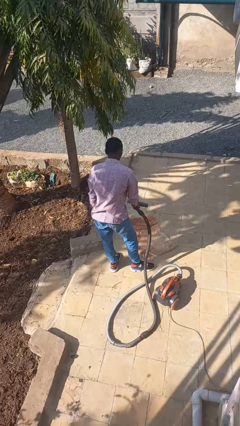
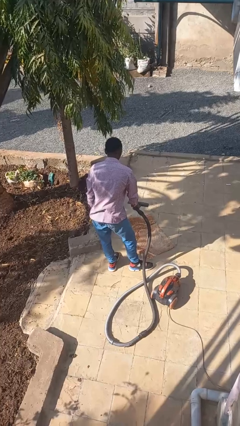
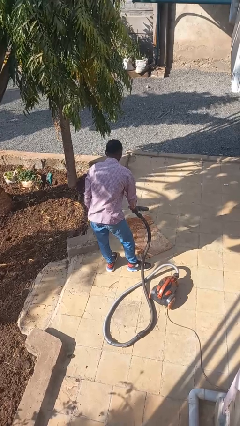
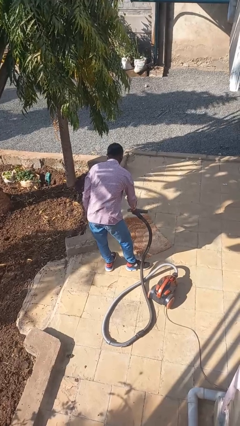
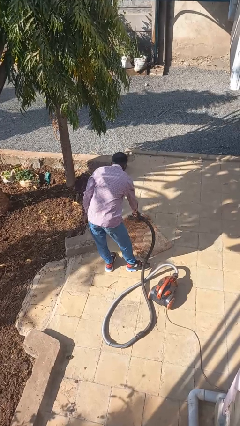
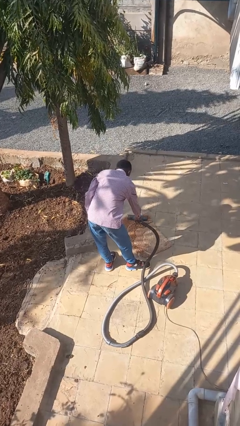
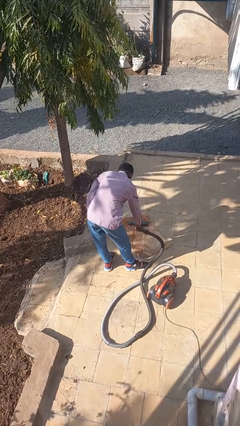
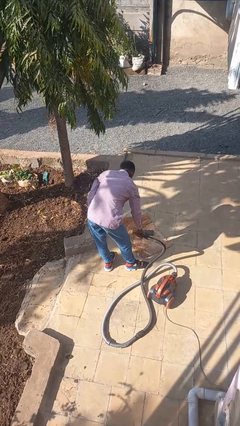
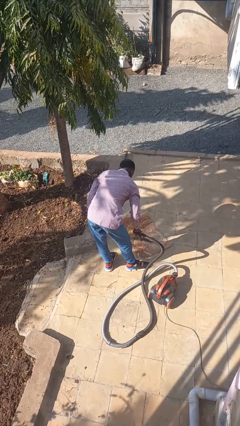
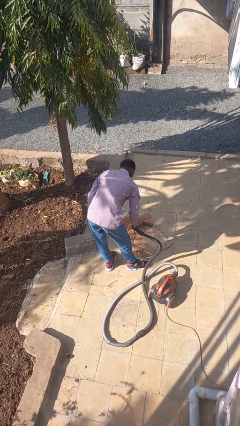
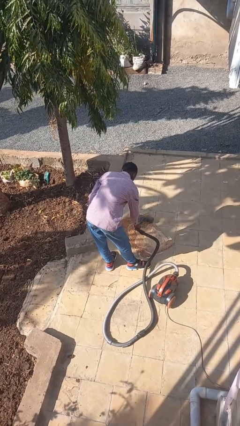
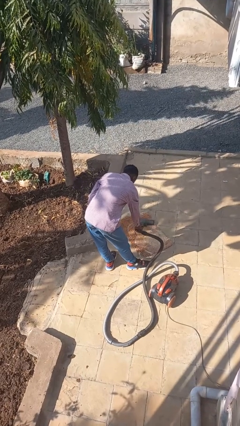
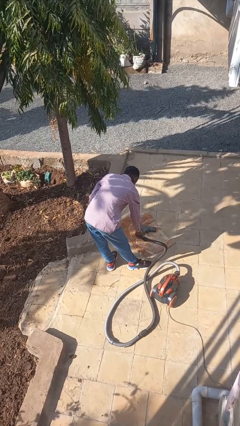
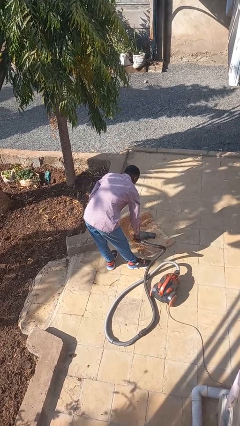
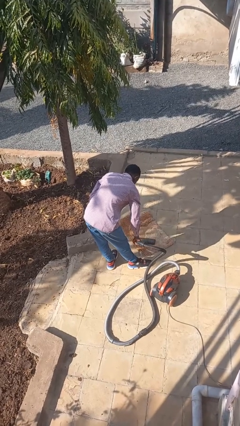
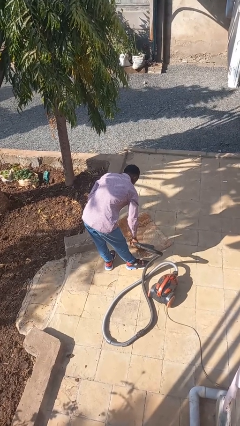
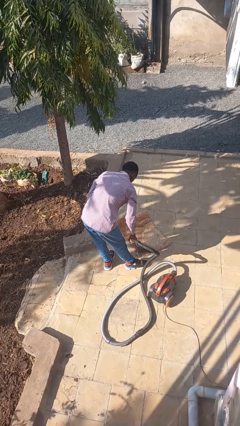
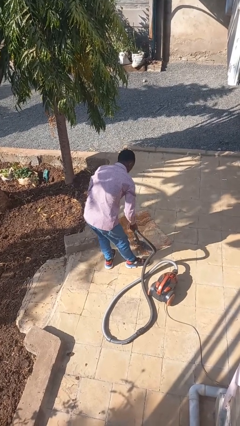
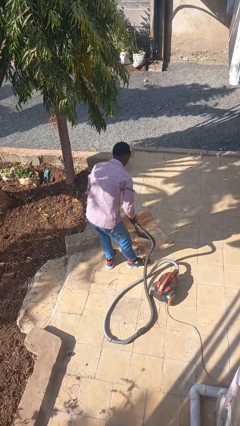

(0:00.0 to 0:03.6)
person vacuums carpet

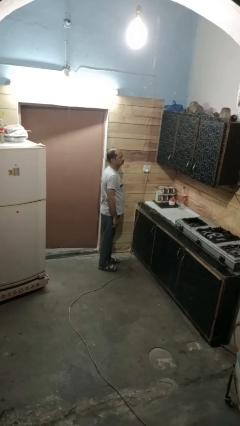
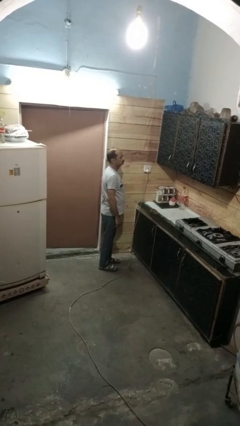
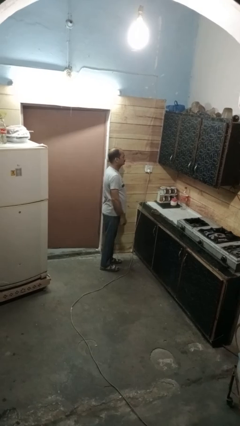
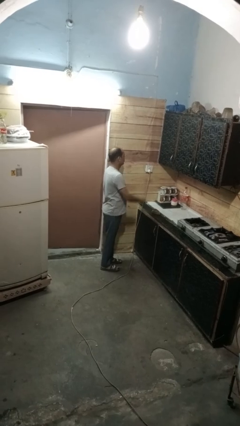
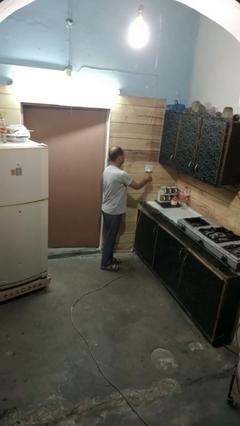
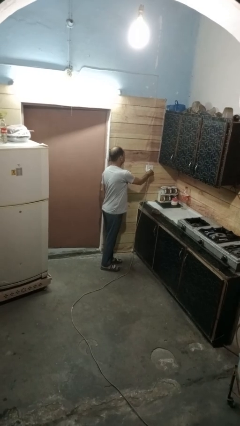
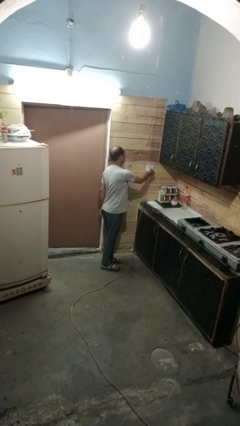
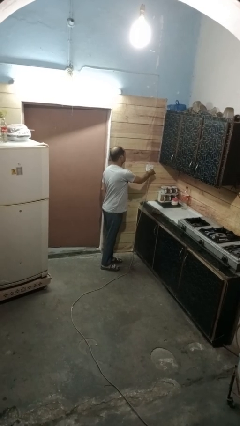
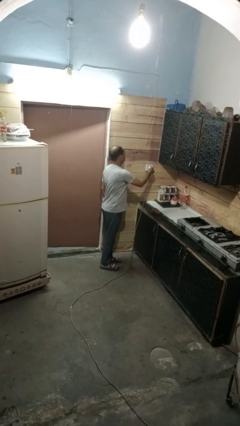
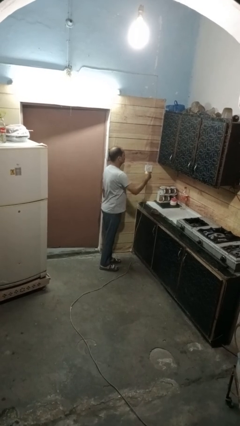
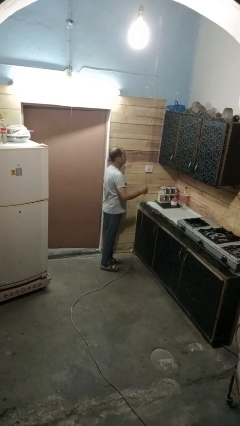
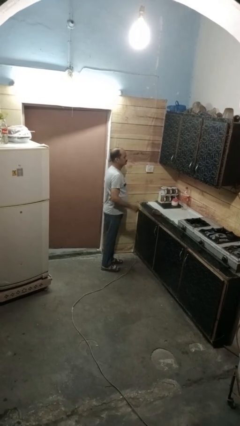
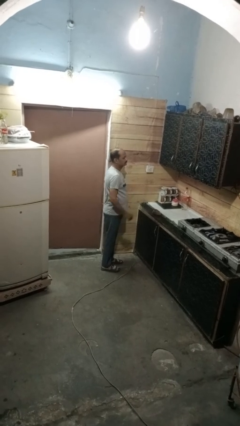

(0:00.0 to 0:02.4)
person unplugs from electrical socket

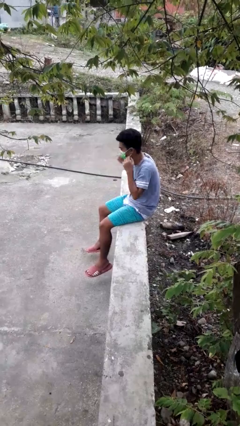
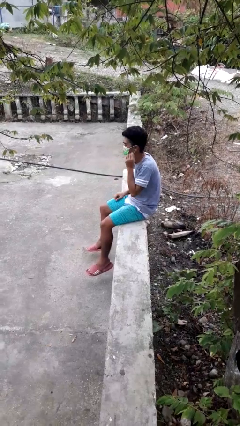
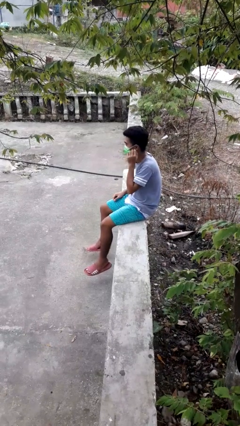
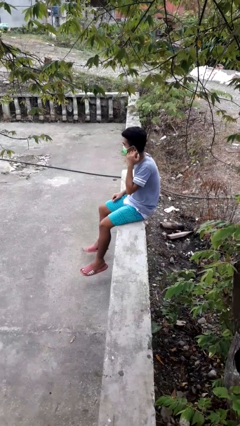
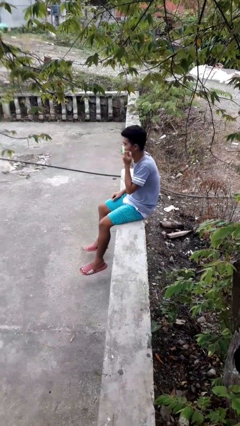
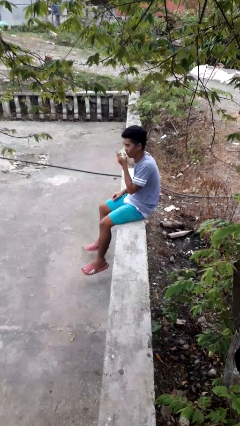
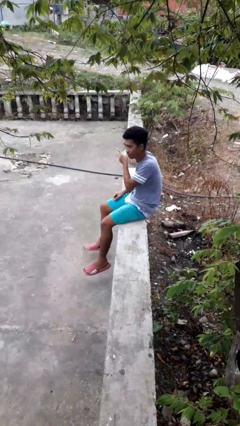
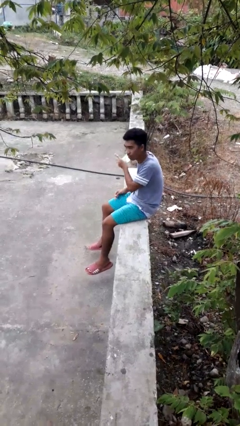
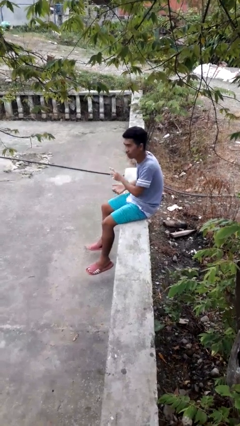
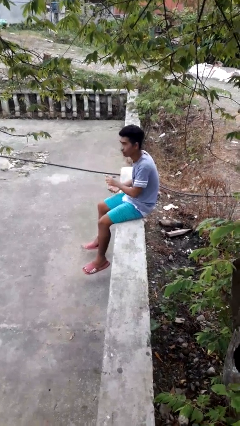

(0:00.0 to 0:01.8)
person takes off facemask

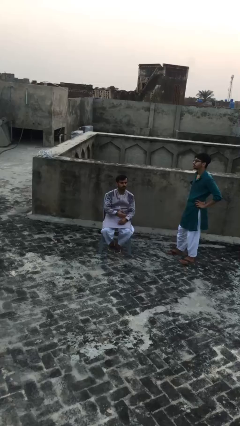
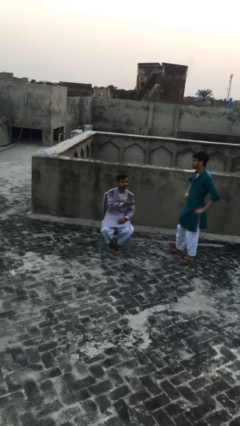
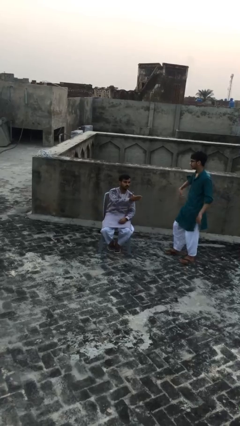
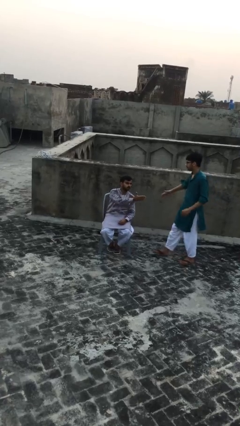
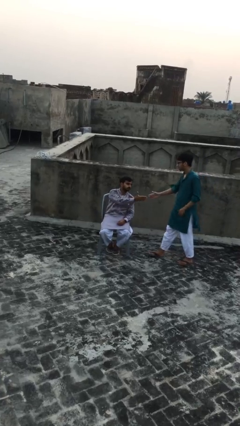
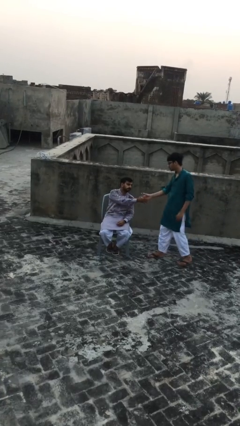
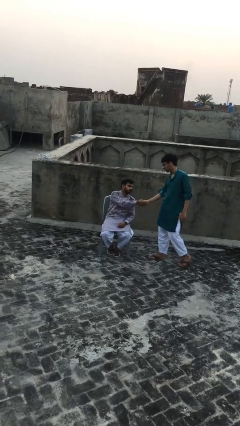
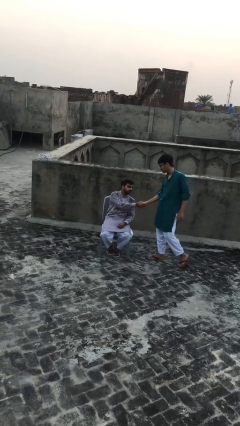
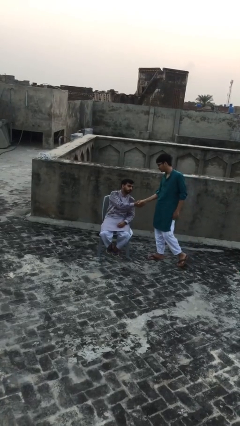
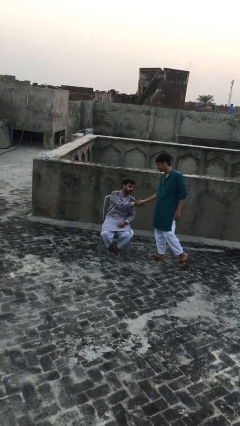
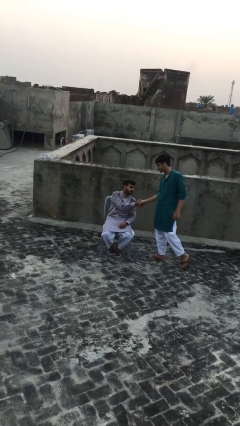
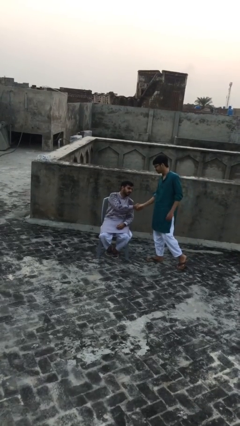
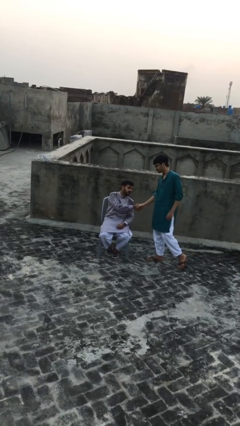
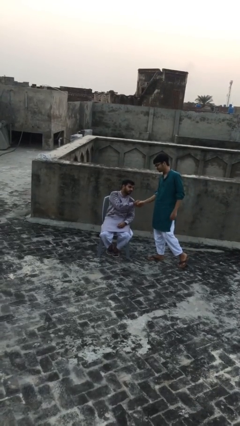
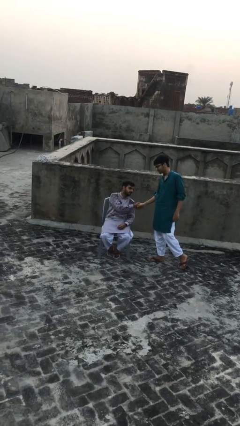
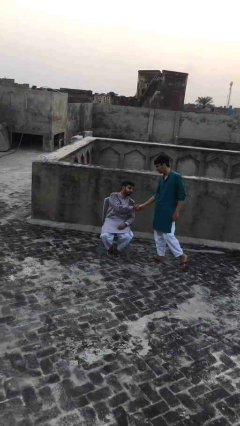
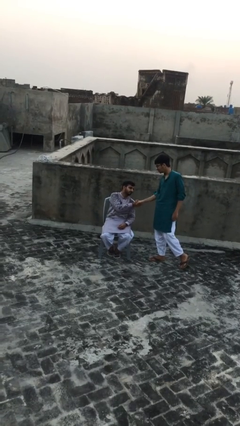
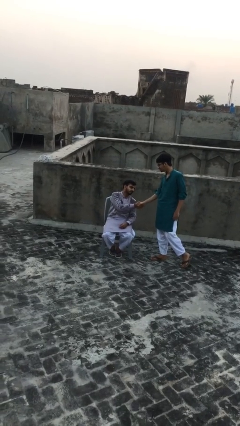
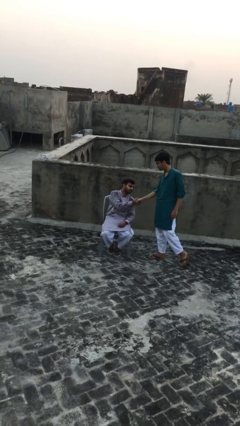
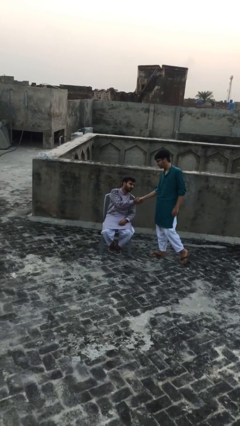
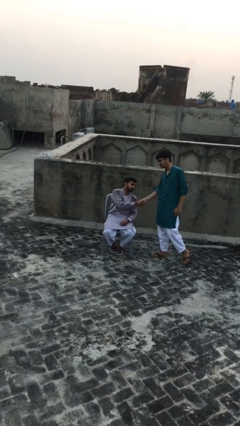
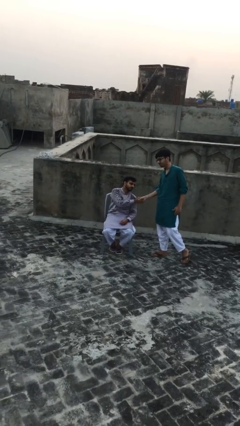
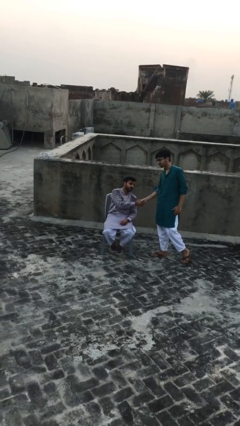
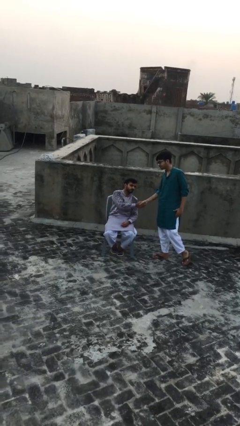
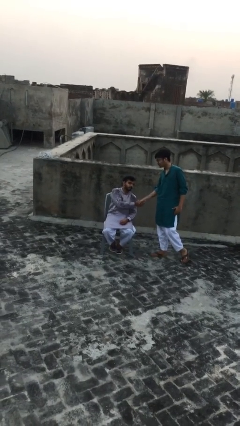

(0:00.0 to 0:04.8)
person shakes hand

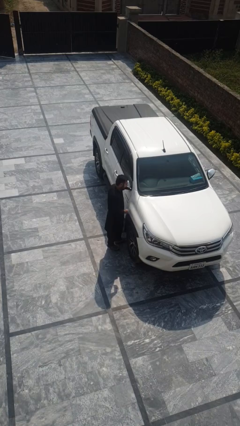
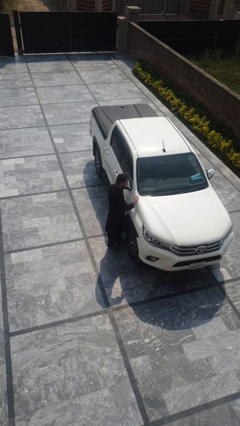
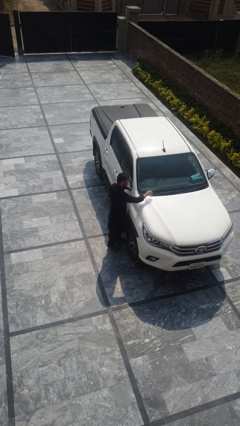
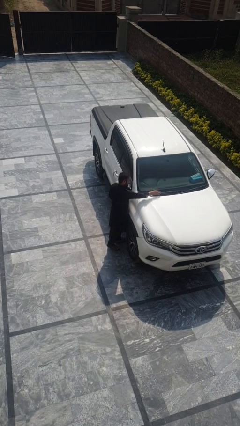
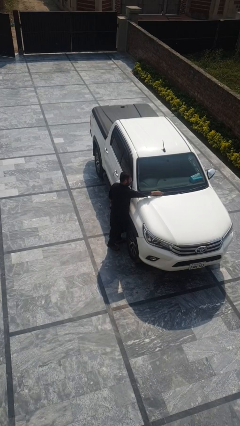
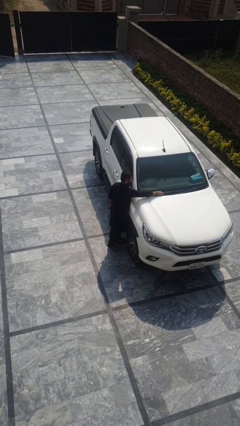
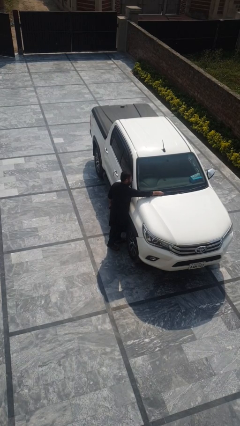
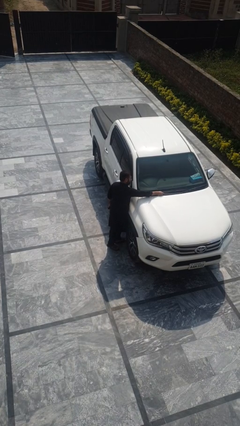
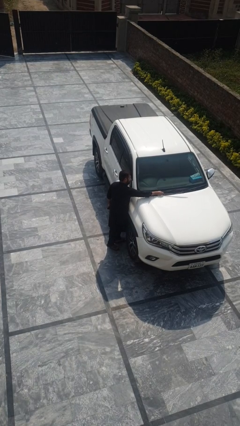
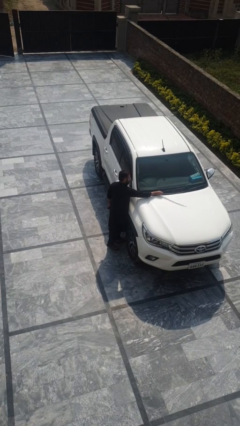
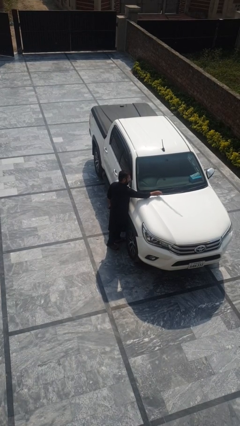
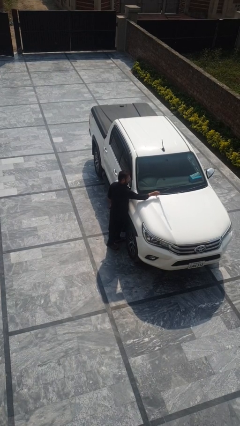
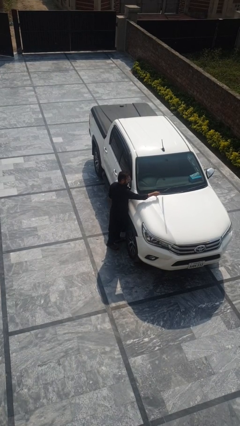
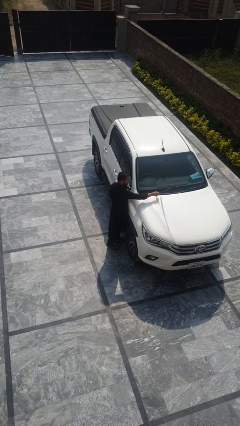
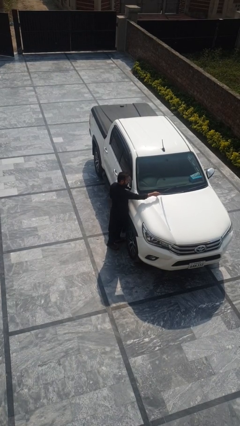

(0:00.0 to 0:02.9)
person flips up car wipers

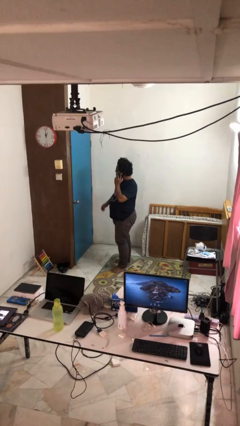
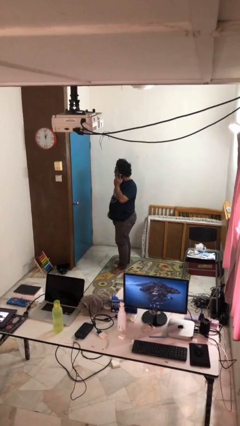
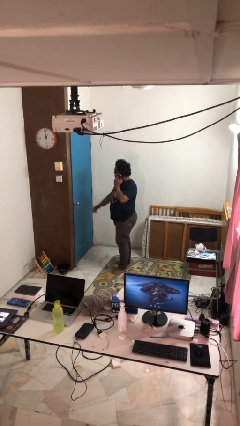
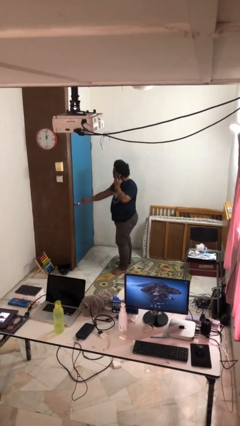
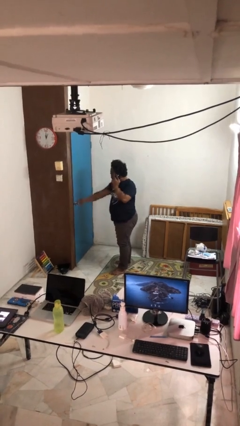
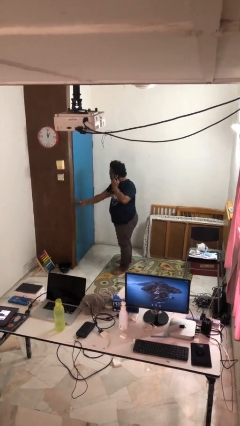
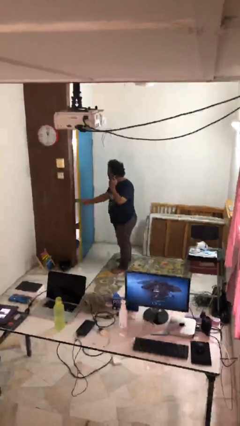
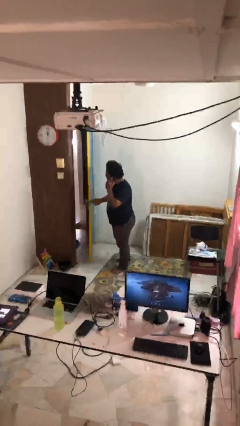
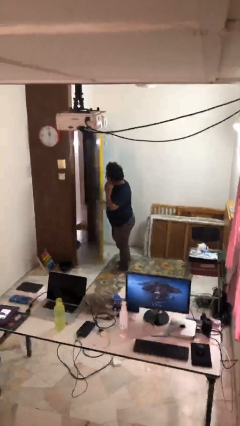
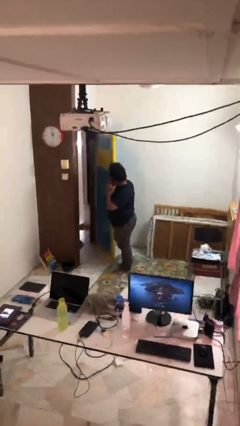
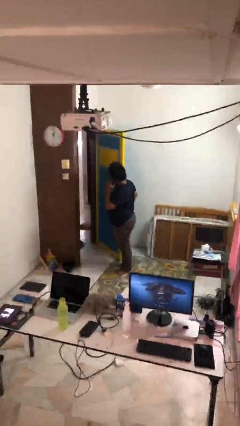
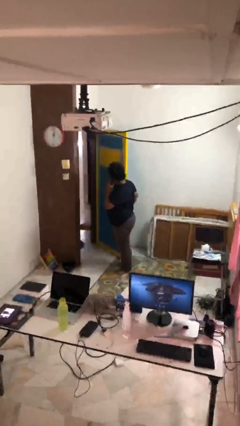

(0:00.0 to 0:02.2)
person opens facility door

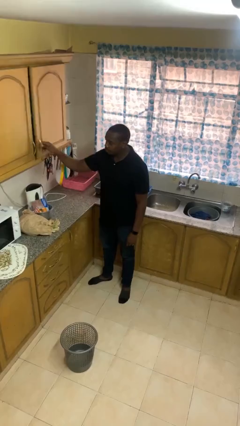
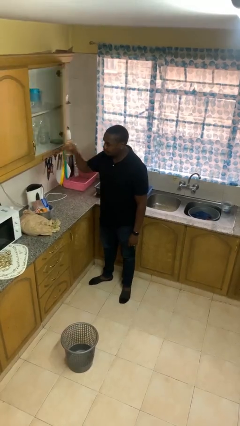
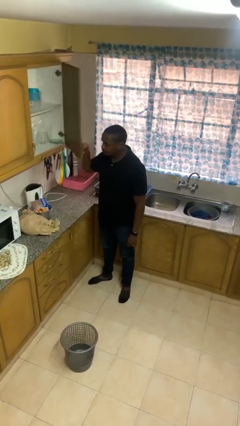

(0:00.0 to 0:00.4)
person opens cabinet
